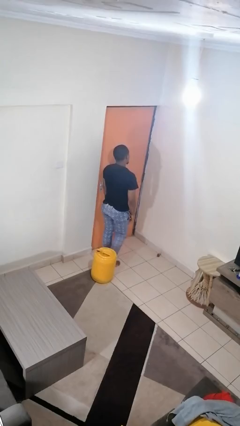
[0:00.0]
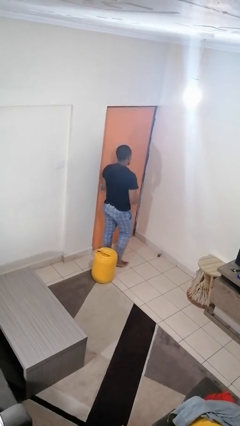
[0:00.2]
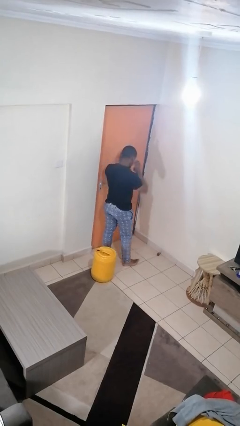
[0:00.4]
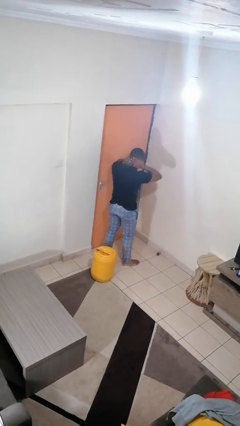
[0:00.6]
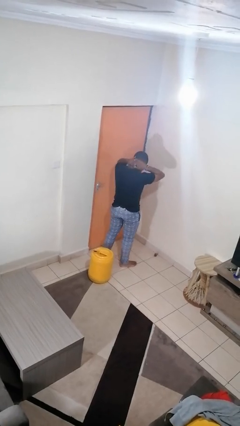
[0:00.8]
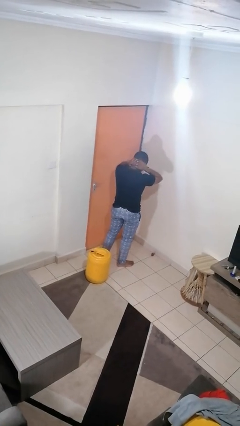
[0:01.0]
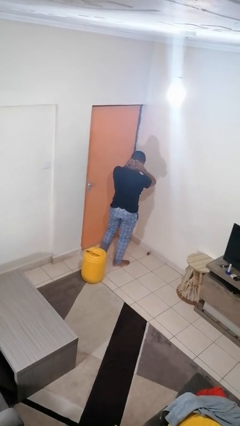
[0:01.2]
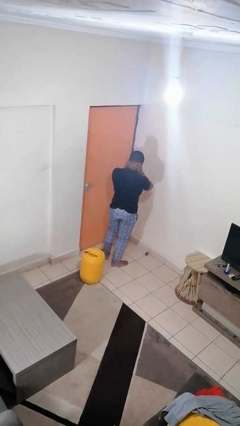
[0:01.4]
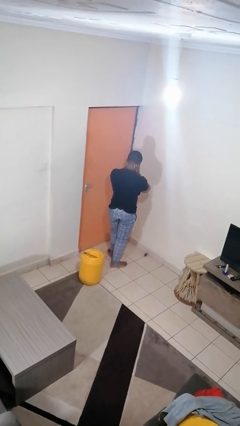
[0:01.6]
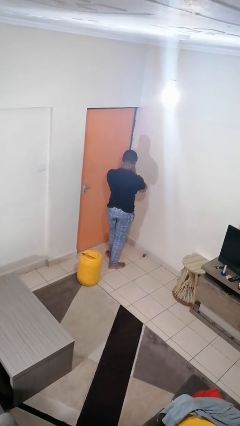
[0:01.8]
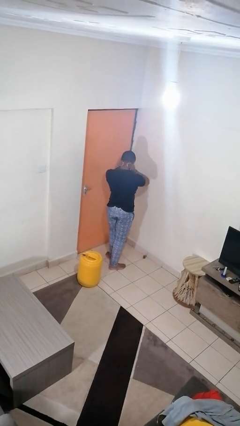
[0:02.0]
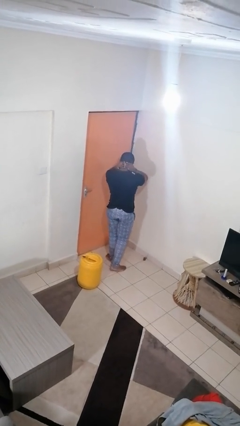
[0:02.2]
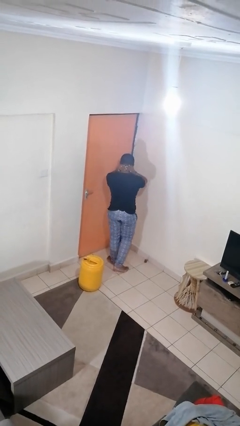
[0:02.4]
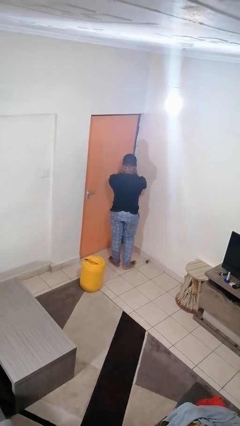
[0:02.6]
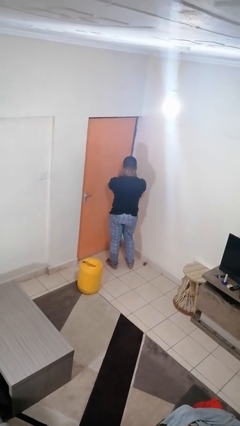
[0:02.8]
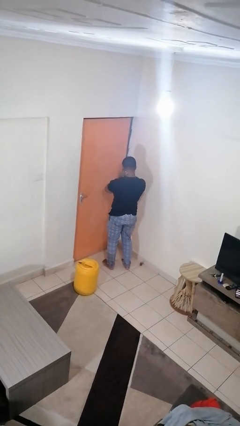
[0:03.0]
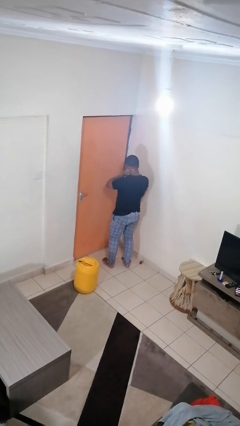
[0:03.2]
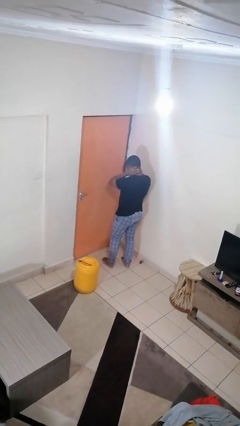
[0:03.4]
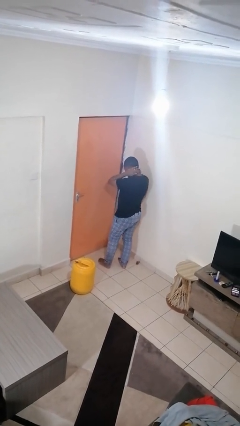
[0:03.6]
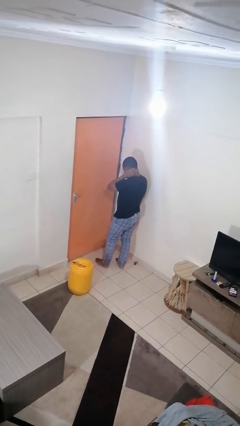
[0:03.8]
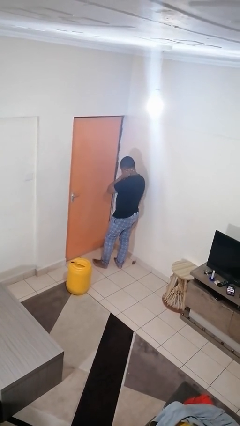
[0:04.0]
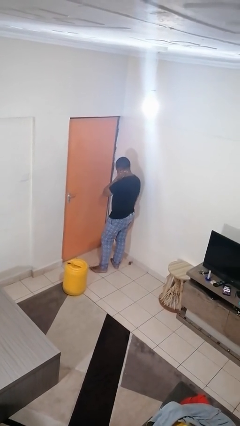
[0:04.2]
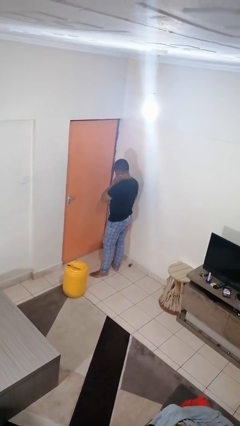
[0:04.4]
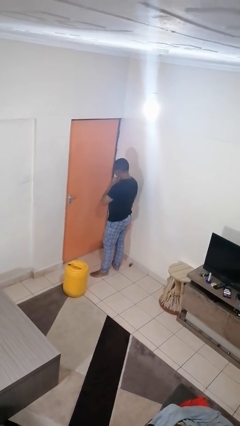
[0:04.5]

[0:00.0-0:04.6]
person rubs neck

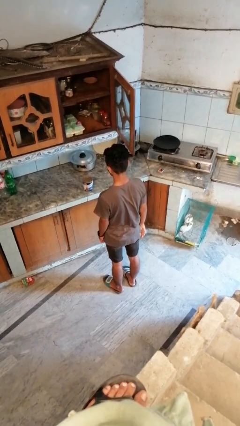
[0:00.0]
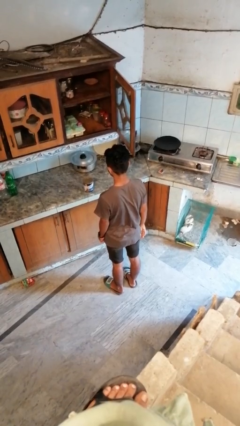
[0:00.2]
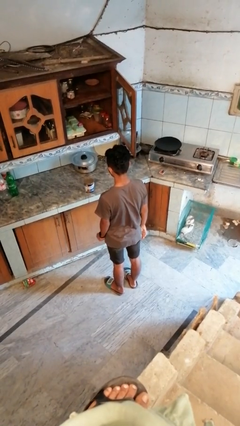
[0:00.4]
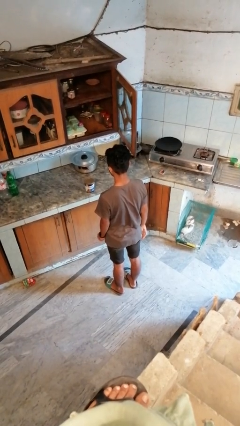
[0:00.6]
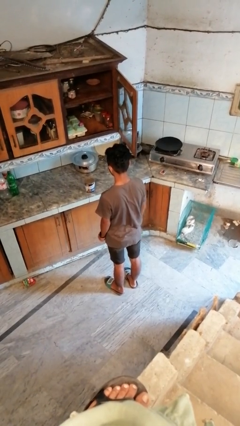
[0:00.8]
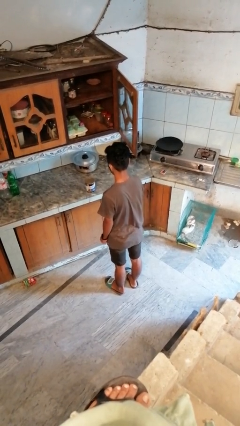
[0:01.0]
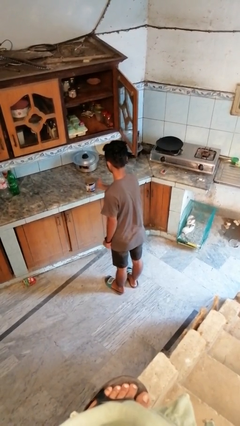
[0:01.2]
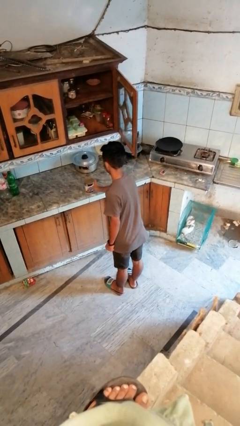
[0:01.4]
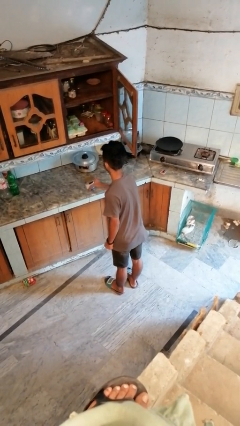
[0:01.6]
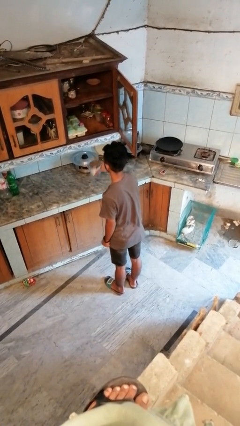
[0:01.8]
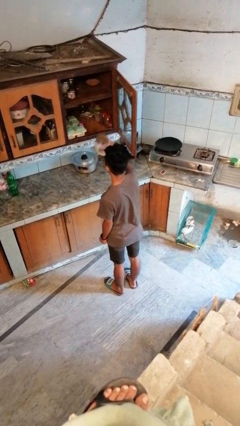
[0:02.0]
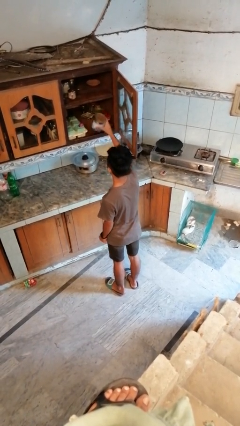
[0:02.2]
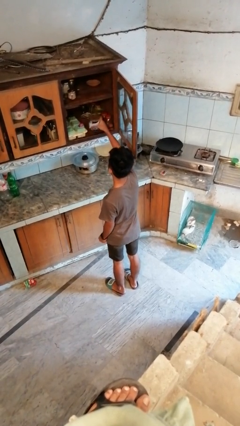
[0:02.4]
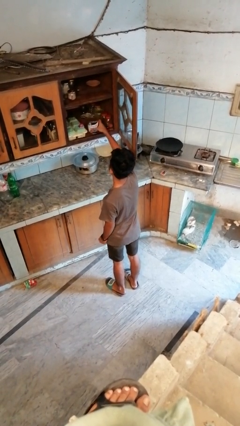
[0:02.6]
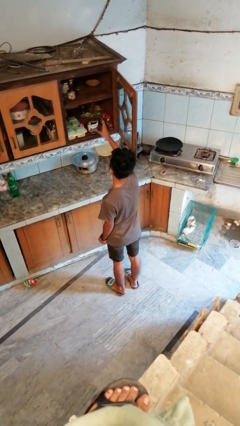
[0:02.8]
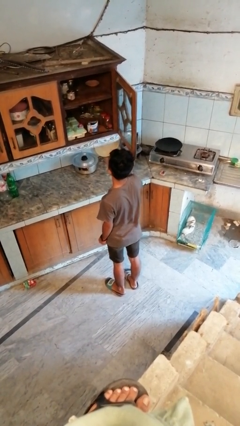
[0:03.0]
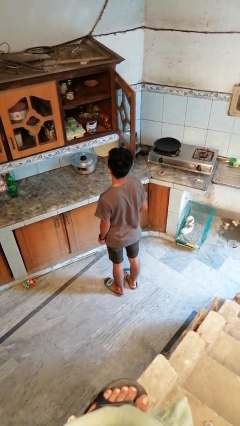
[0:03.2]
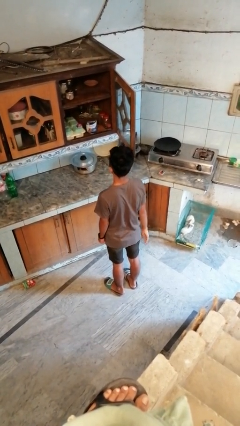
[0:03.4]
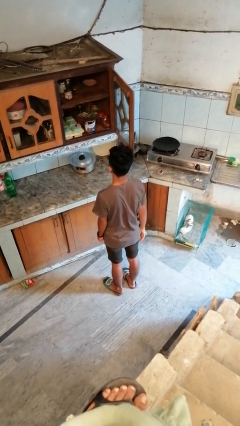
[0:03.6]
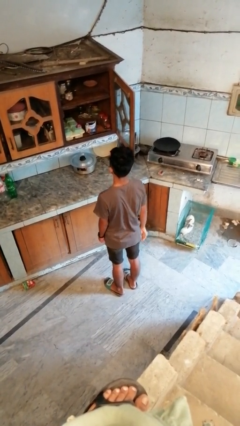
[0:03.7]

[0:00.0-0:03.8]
person puts object in cabinet

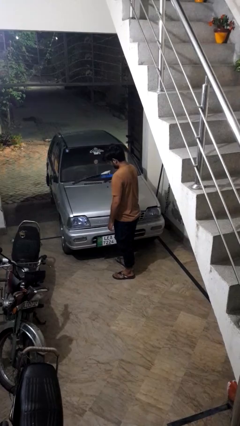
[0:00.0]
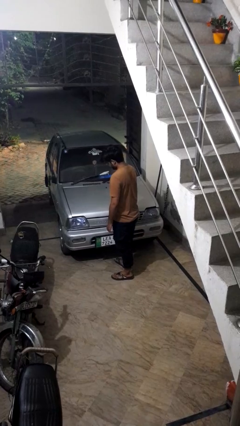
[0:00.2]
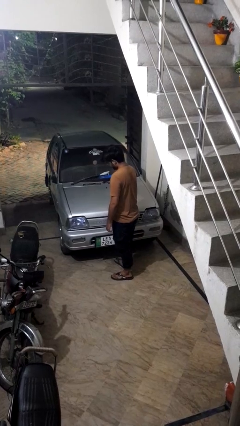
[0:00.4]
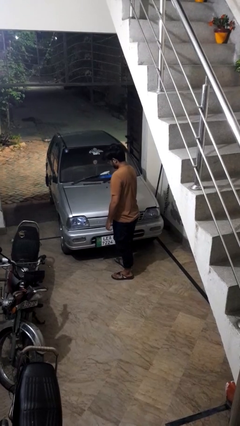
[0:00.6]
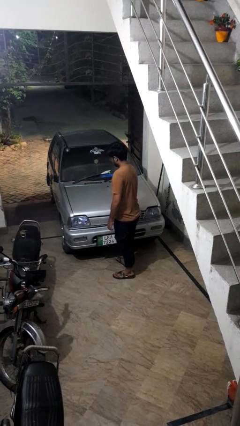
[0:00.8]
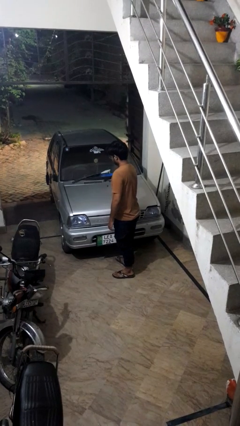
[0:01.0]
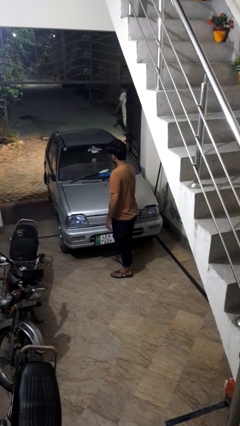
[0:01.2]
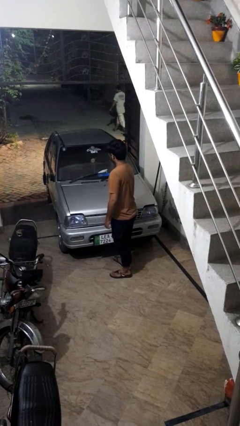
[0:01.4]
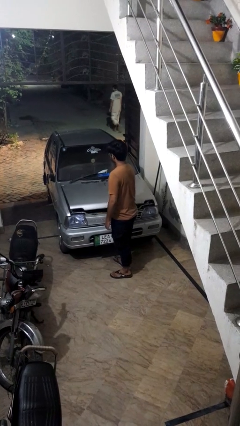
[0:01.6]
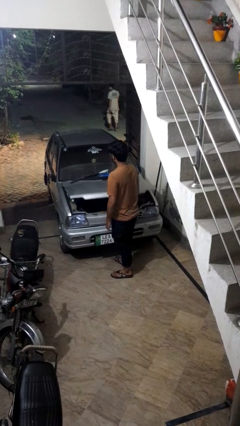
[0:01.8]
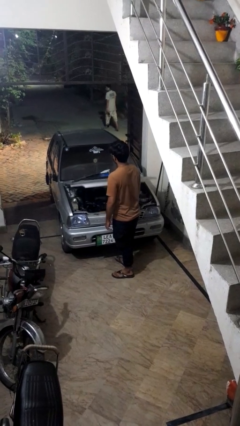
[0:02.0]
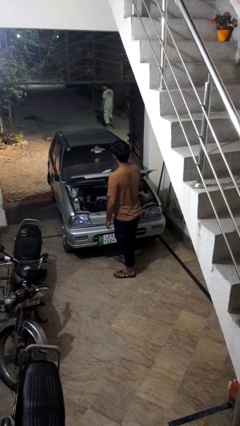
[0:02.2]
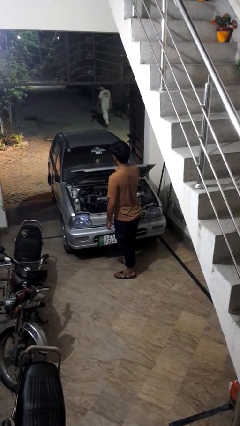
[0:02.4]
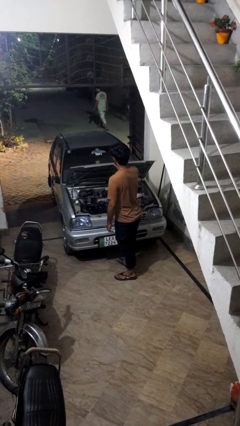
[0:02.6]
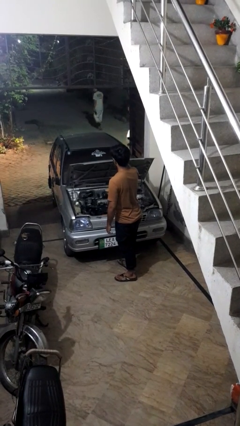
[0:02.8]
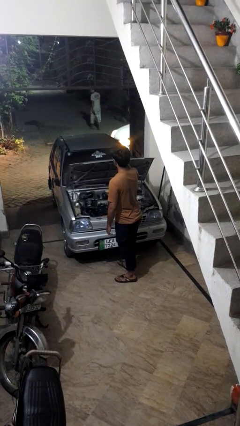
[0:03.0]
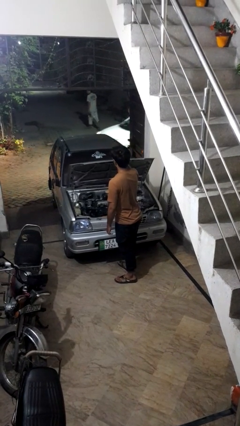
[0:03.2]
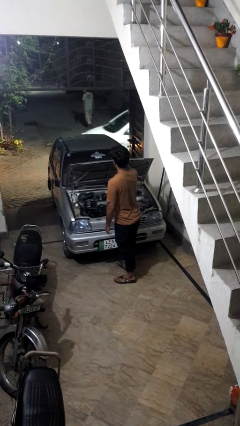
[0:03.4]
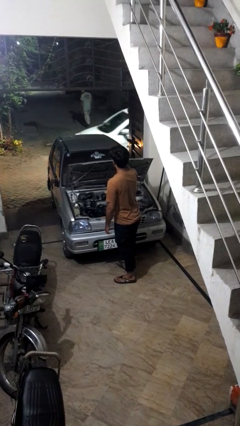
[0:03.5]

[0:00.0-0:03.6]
person opens car hood

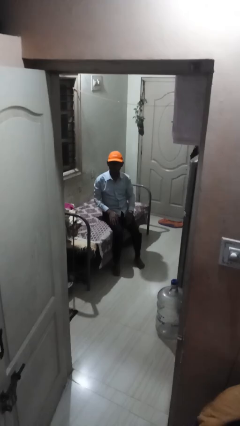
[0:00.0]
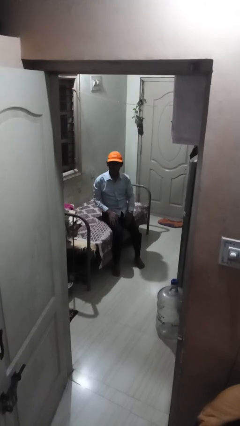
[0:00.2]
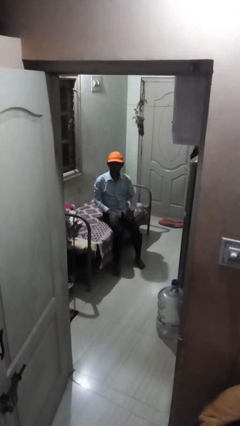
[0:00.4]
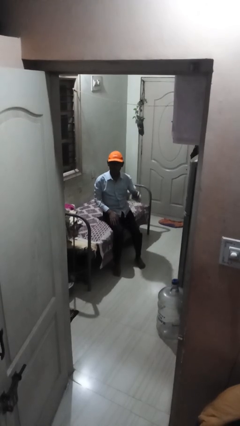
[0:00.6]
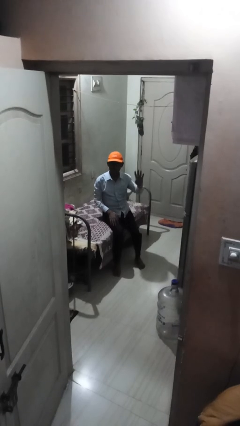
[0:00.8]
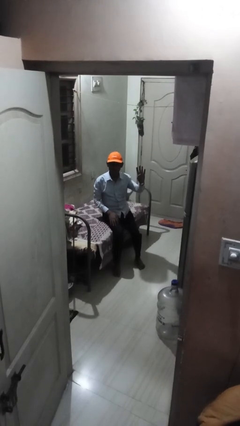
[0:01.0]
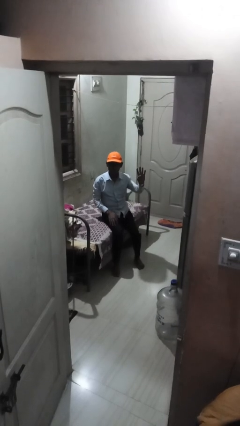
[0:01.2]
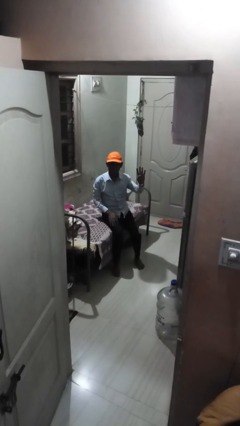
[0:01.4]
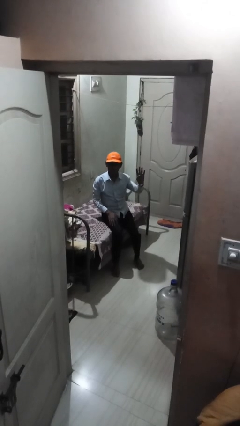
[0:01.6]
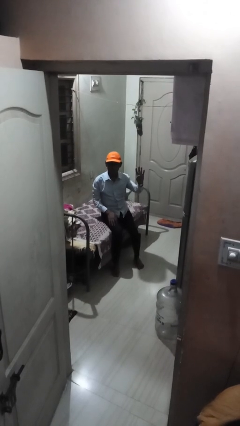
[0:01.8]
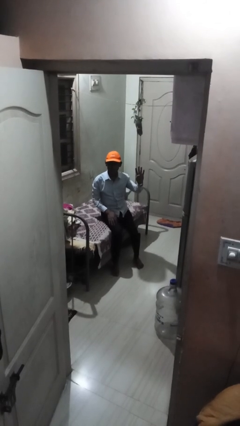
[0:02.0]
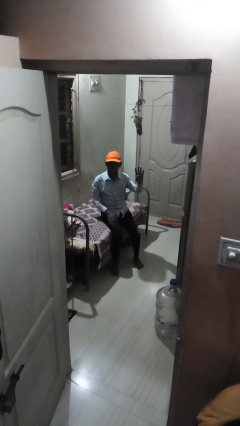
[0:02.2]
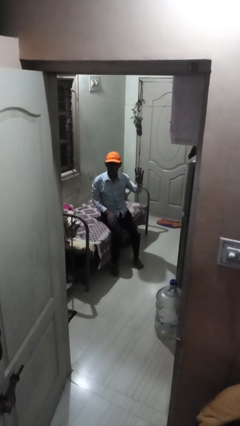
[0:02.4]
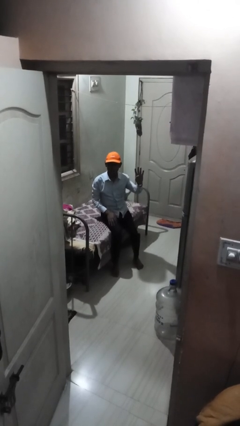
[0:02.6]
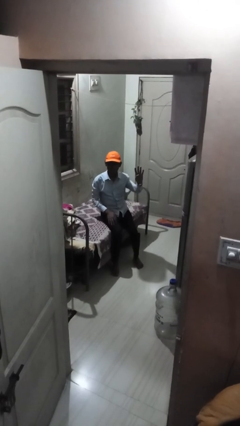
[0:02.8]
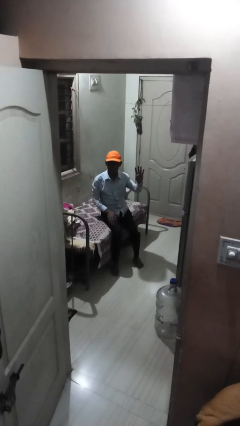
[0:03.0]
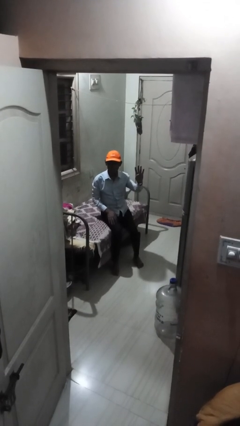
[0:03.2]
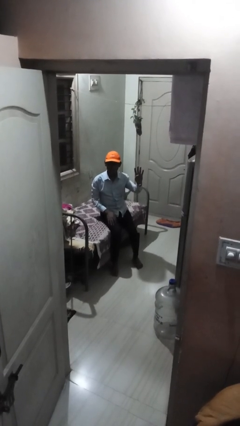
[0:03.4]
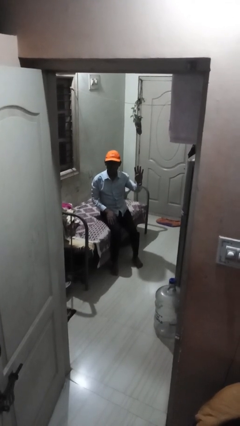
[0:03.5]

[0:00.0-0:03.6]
person gestures number four

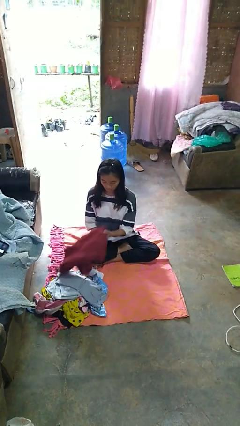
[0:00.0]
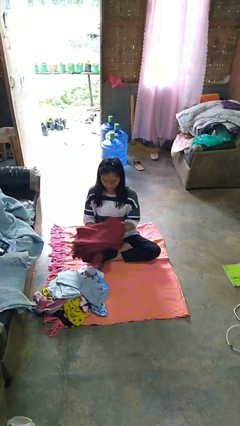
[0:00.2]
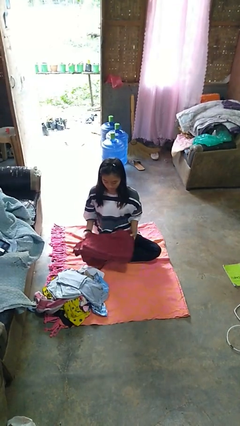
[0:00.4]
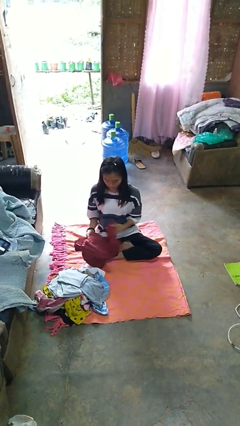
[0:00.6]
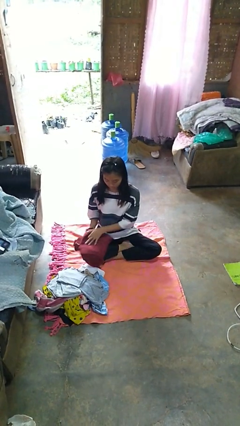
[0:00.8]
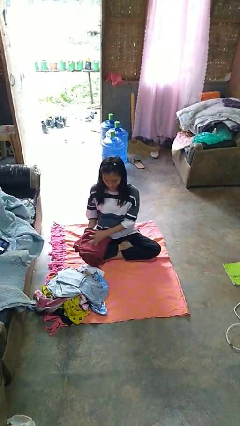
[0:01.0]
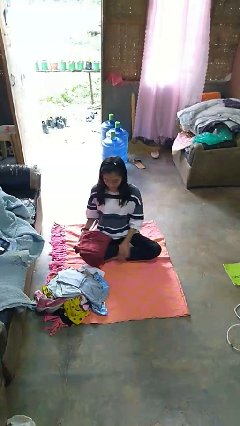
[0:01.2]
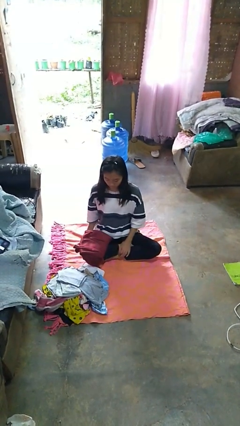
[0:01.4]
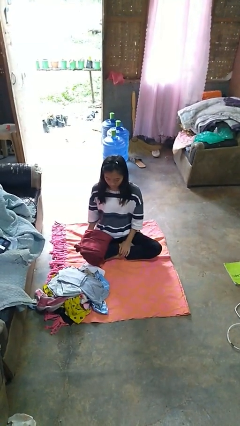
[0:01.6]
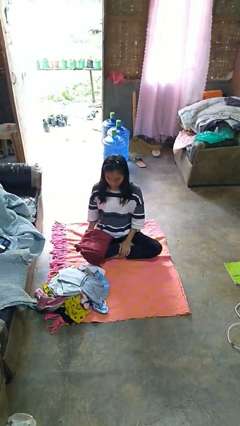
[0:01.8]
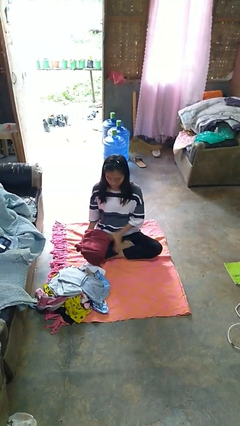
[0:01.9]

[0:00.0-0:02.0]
person folds pants

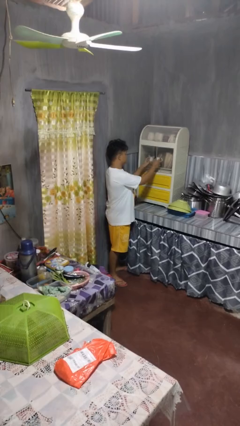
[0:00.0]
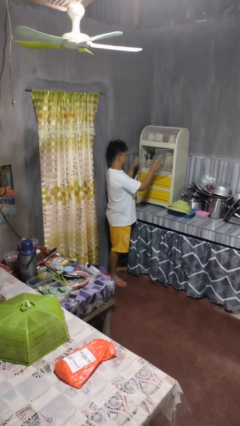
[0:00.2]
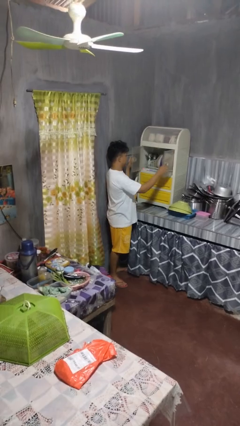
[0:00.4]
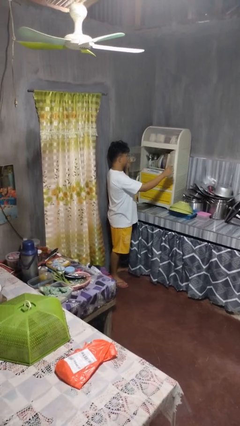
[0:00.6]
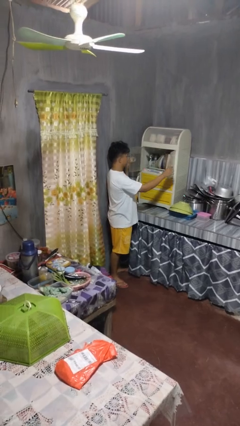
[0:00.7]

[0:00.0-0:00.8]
person opens cabinet
